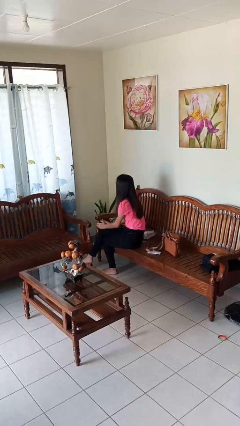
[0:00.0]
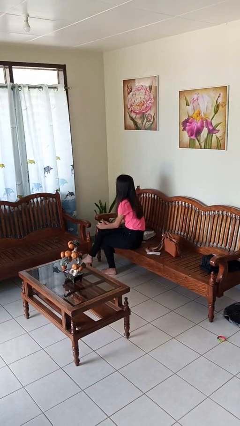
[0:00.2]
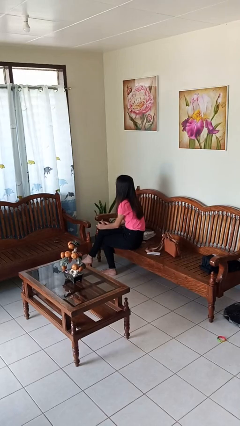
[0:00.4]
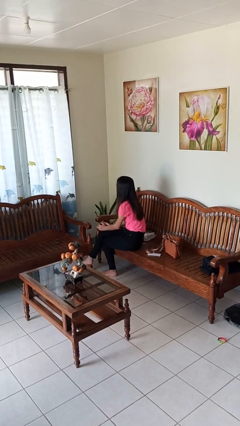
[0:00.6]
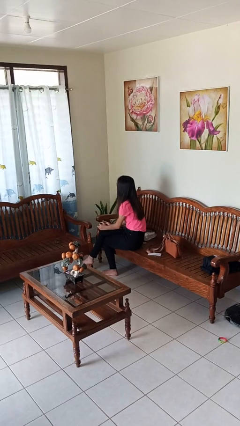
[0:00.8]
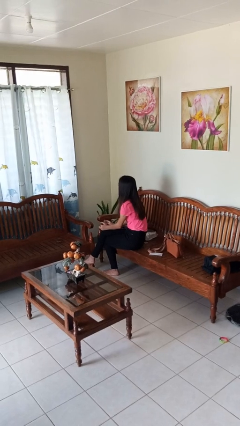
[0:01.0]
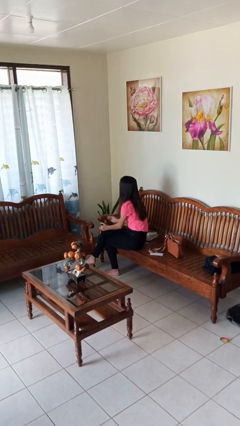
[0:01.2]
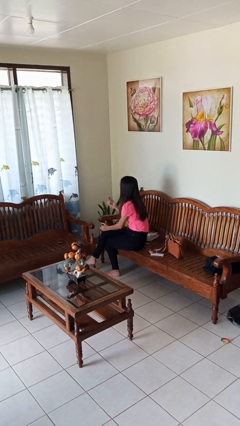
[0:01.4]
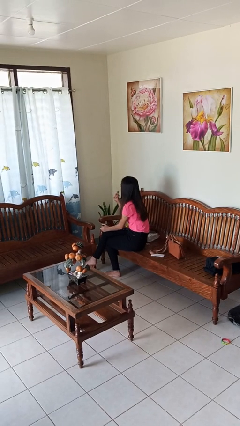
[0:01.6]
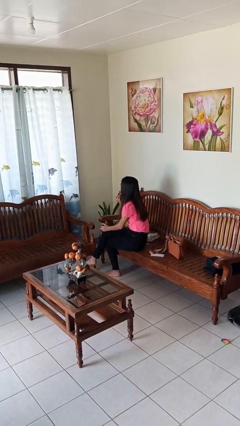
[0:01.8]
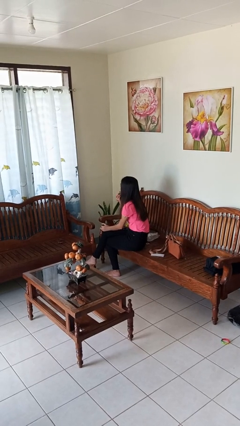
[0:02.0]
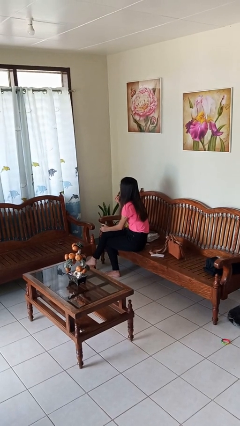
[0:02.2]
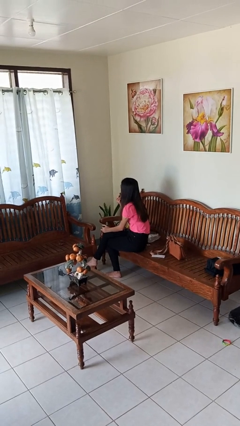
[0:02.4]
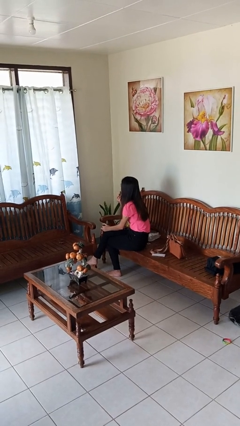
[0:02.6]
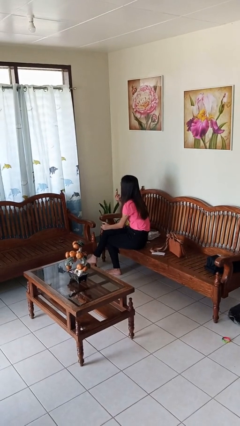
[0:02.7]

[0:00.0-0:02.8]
person applies lip makeup

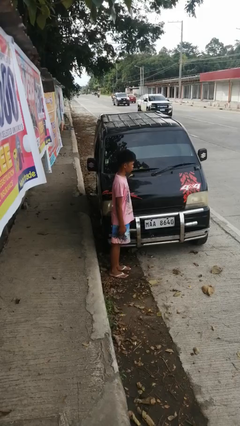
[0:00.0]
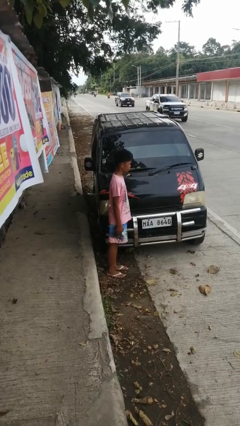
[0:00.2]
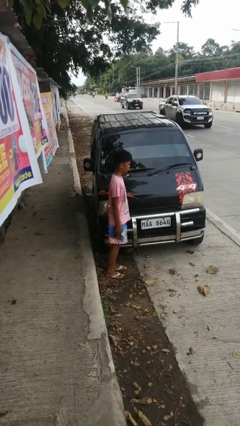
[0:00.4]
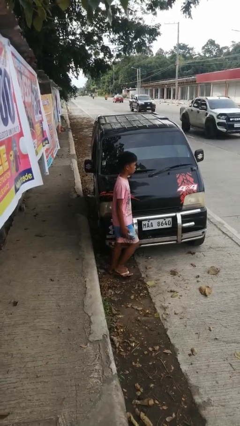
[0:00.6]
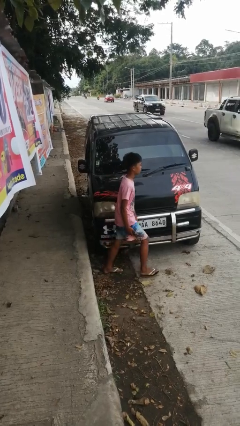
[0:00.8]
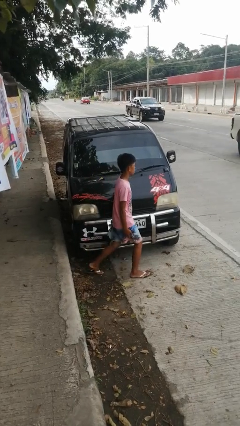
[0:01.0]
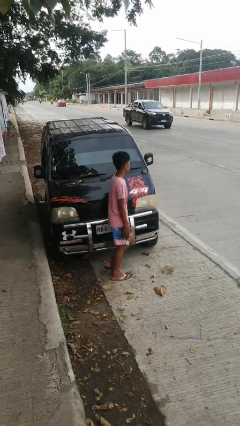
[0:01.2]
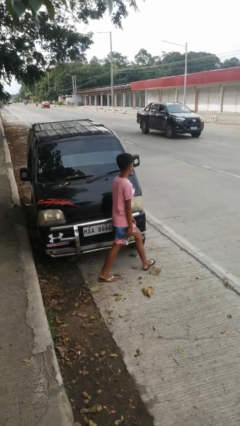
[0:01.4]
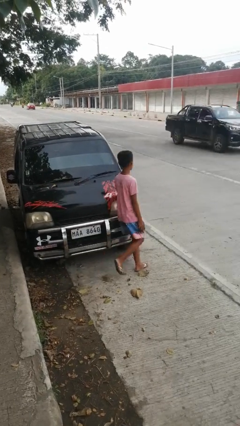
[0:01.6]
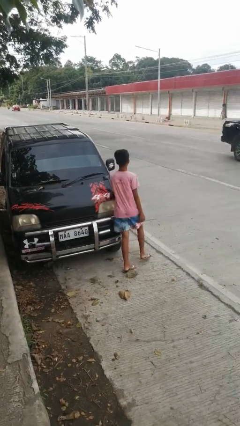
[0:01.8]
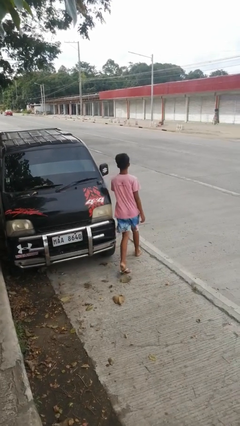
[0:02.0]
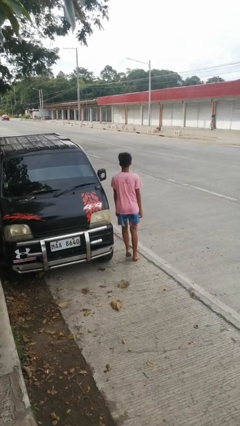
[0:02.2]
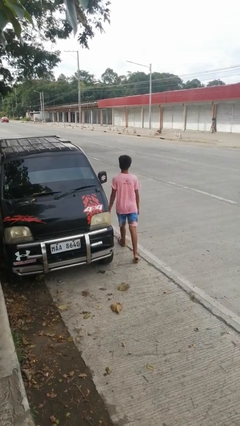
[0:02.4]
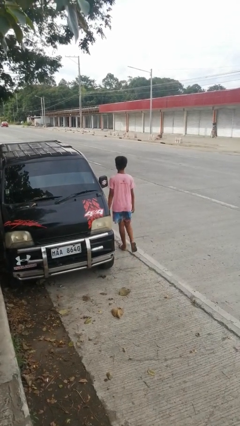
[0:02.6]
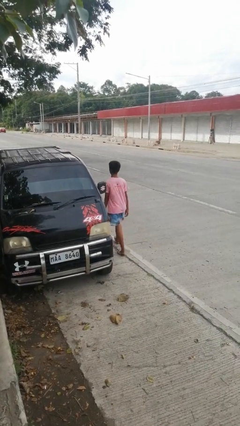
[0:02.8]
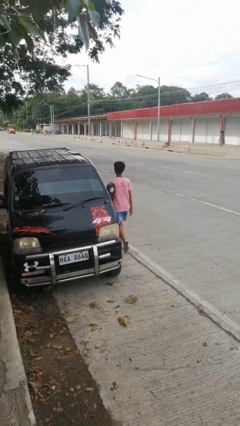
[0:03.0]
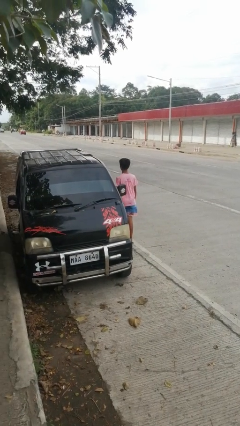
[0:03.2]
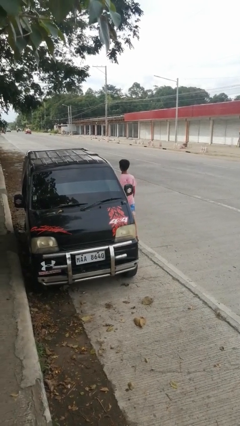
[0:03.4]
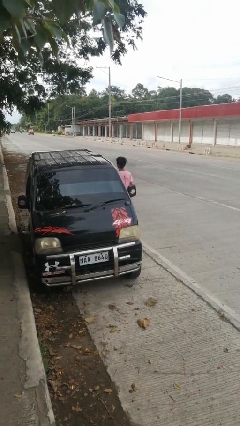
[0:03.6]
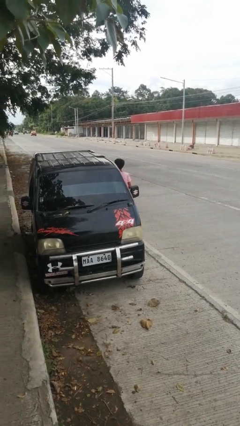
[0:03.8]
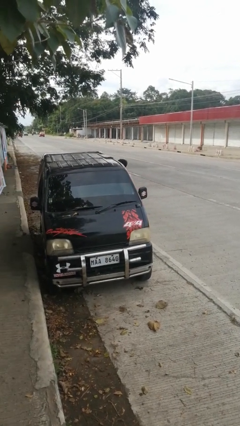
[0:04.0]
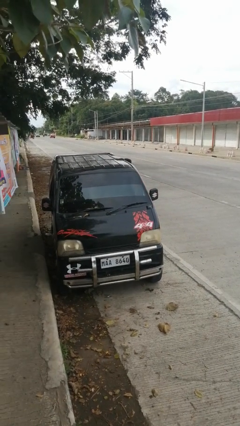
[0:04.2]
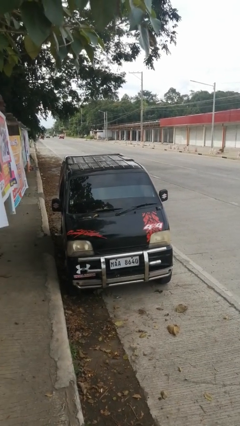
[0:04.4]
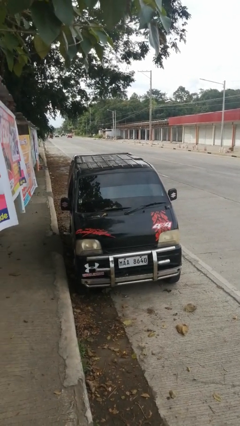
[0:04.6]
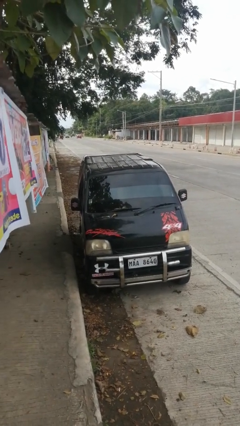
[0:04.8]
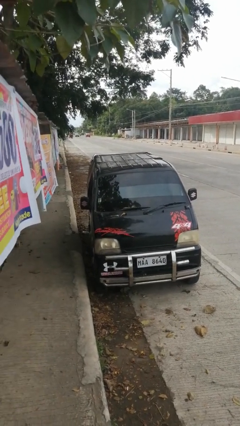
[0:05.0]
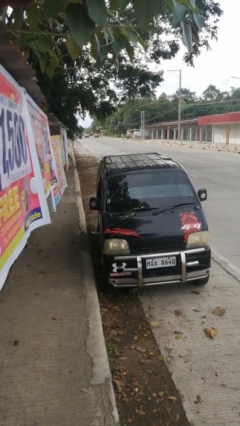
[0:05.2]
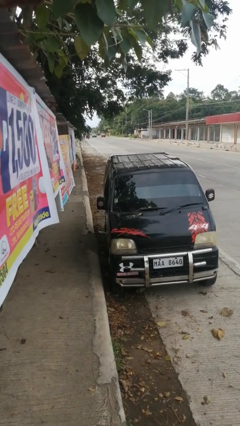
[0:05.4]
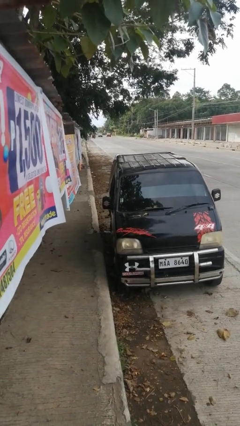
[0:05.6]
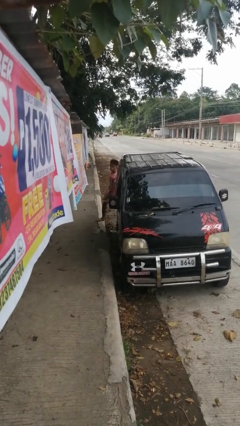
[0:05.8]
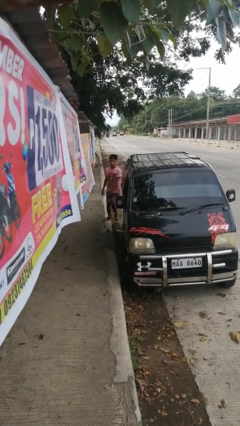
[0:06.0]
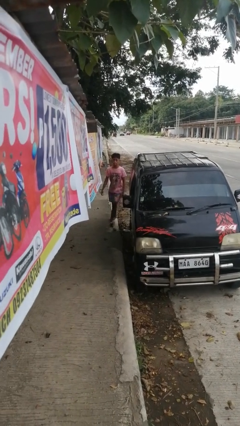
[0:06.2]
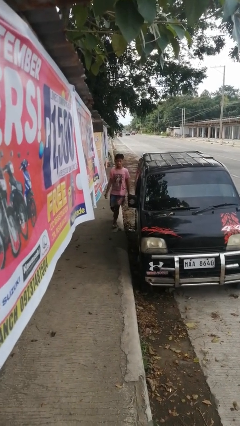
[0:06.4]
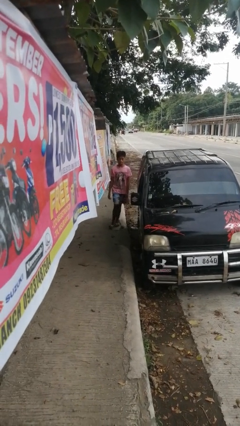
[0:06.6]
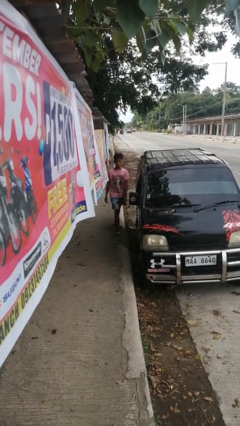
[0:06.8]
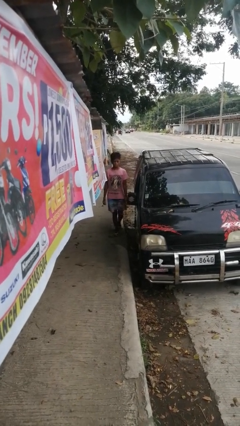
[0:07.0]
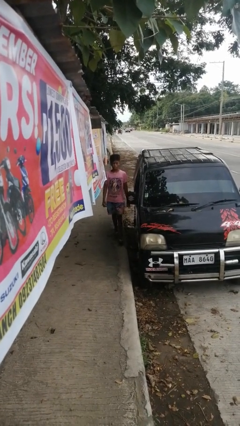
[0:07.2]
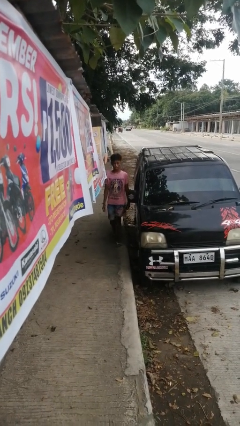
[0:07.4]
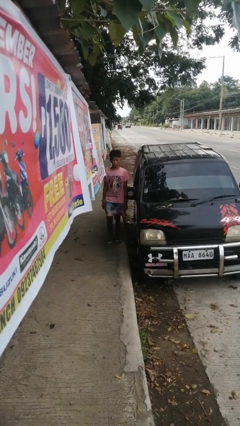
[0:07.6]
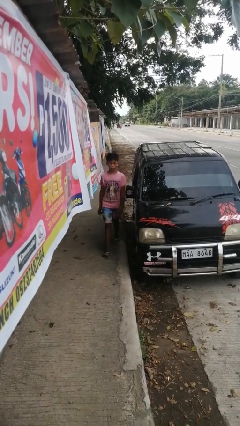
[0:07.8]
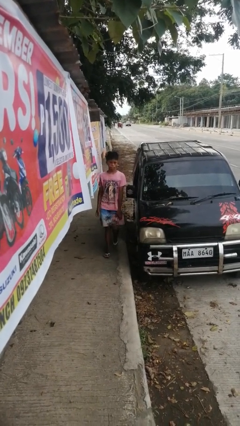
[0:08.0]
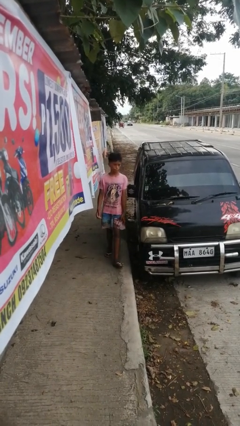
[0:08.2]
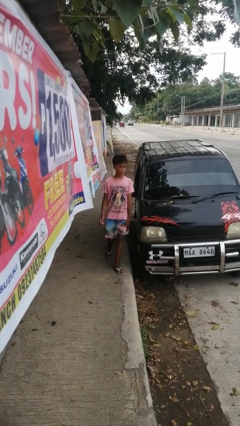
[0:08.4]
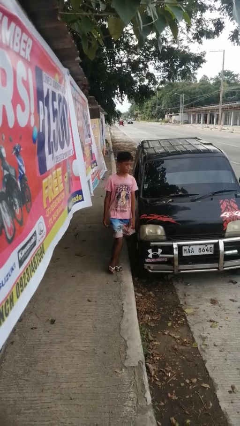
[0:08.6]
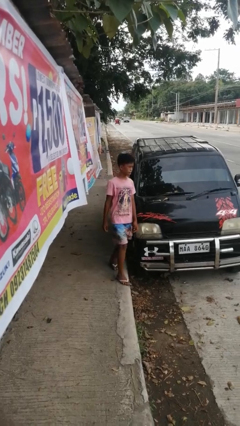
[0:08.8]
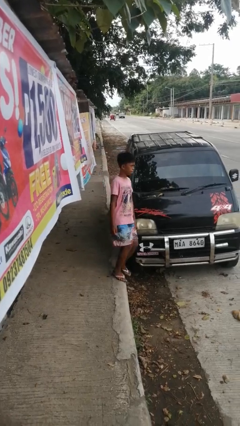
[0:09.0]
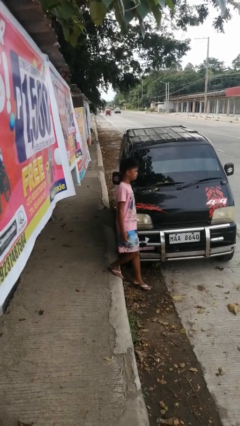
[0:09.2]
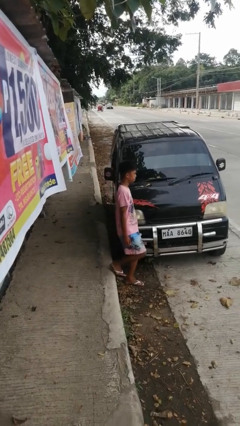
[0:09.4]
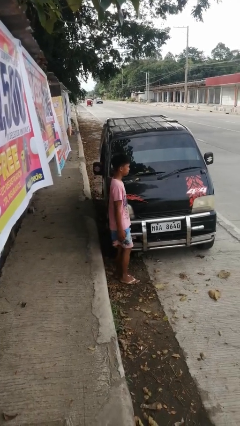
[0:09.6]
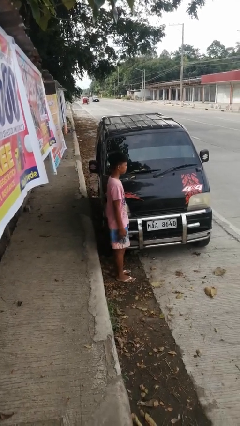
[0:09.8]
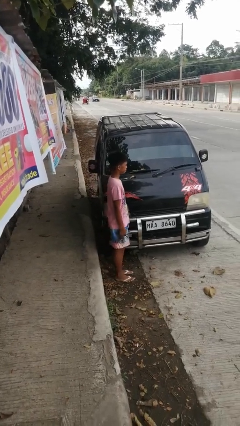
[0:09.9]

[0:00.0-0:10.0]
person walks around car

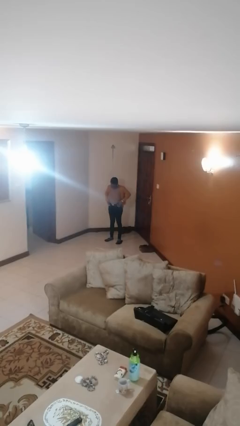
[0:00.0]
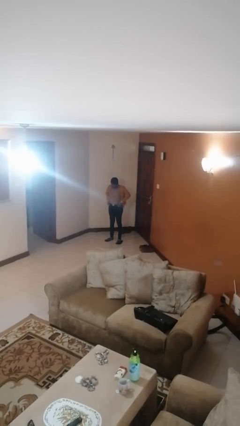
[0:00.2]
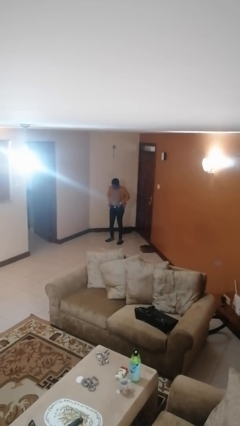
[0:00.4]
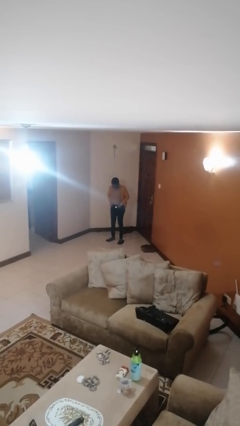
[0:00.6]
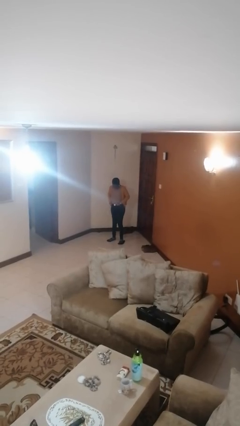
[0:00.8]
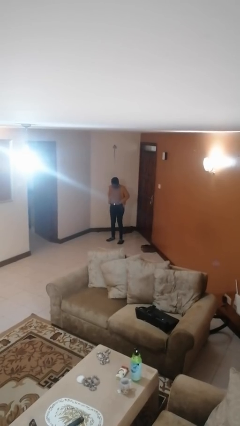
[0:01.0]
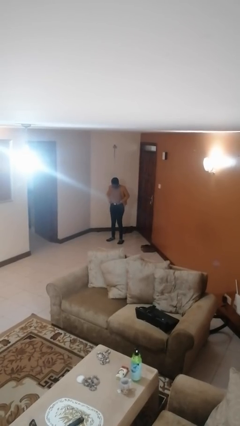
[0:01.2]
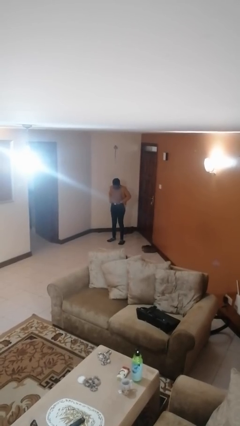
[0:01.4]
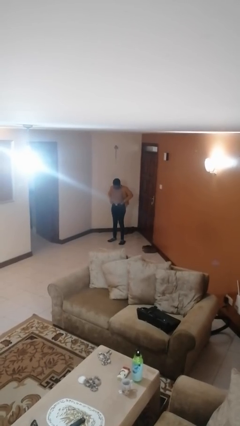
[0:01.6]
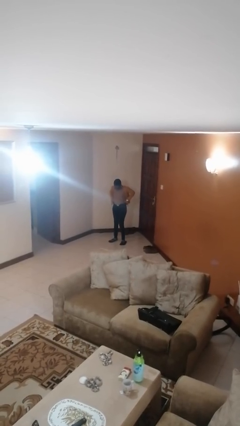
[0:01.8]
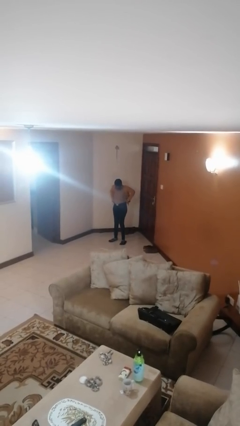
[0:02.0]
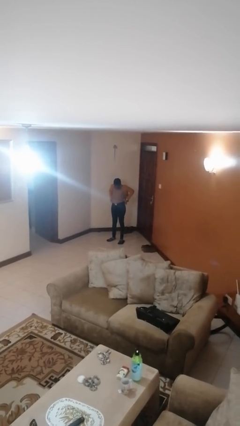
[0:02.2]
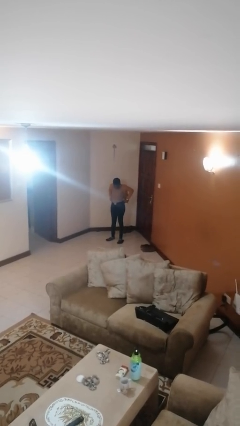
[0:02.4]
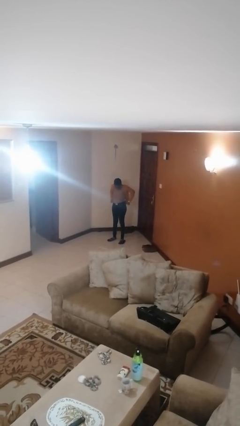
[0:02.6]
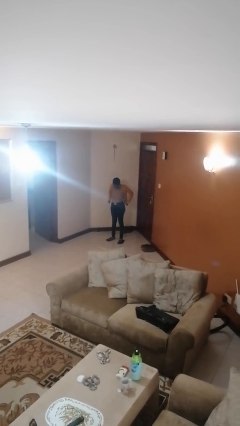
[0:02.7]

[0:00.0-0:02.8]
person hikes up pants

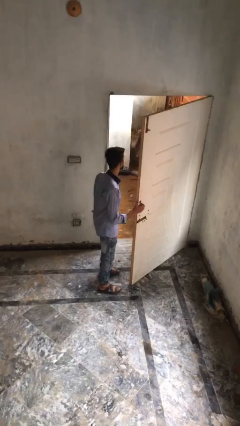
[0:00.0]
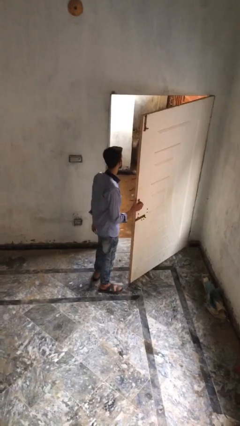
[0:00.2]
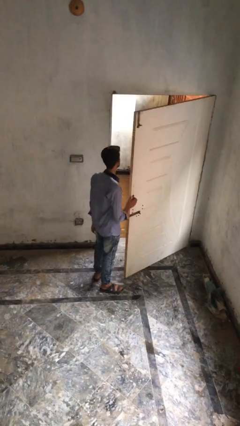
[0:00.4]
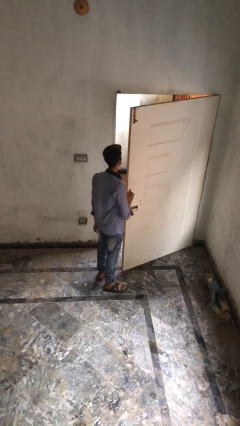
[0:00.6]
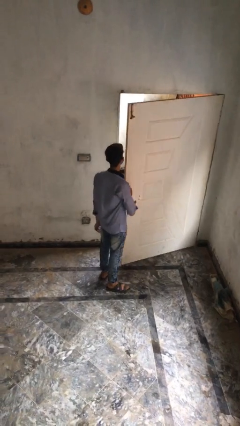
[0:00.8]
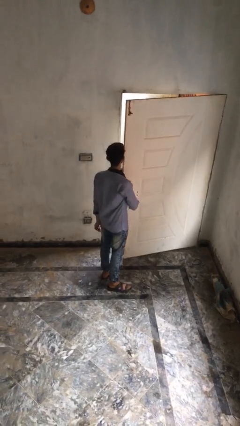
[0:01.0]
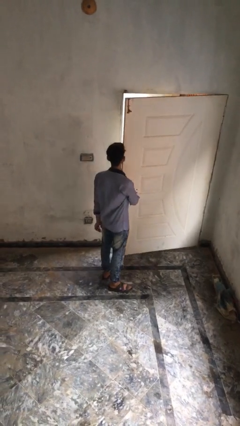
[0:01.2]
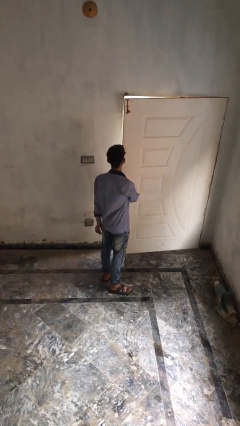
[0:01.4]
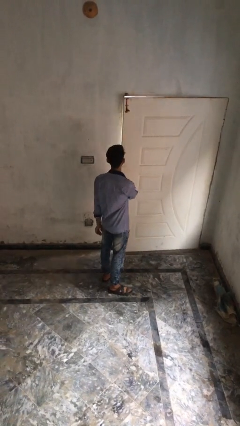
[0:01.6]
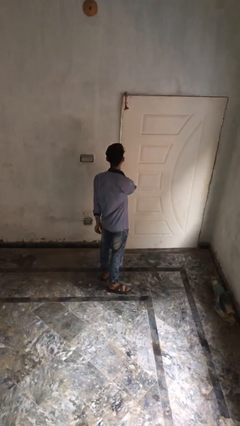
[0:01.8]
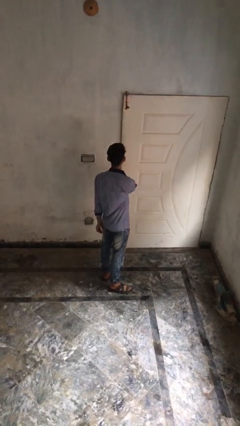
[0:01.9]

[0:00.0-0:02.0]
person closes facility door

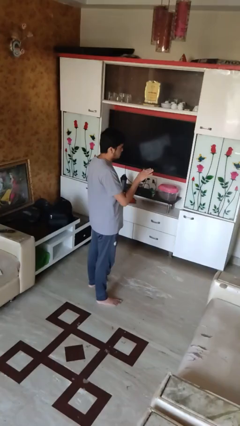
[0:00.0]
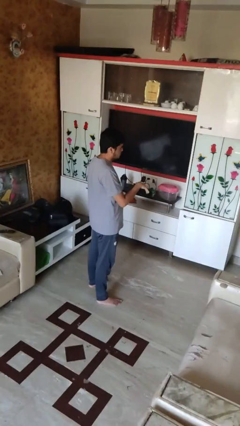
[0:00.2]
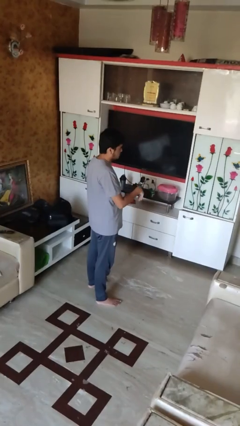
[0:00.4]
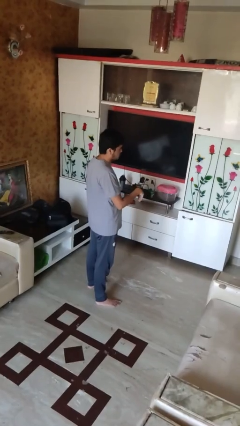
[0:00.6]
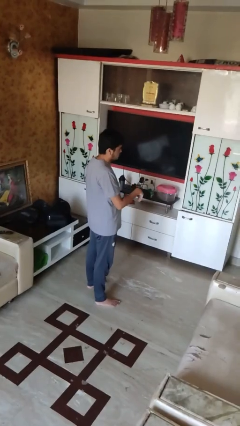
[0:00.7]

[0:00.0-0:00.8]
person gestures swipe down
